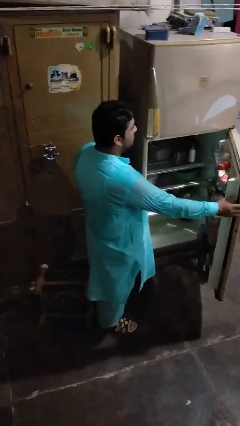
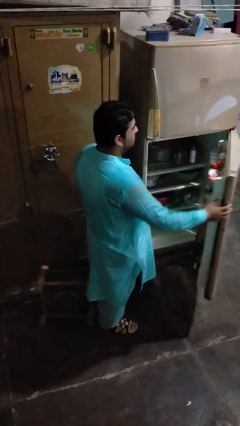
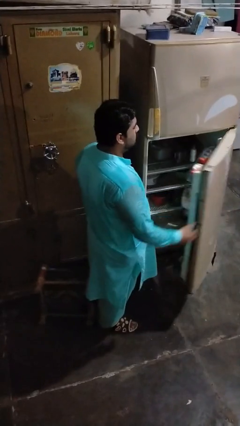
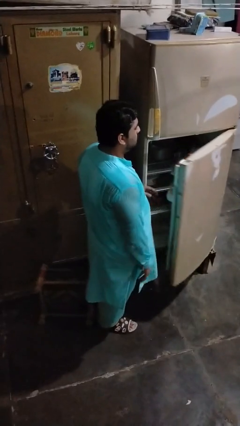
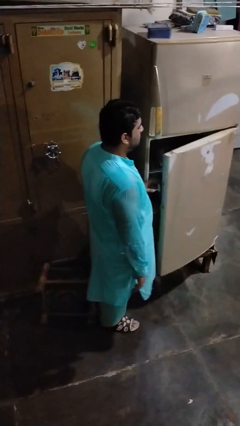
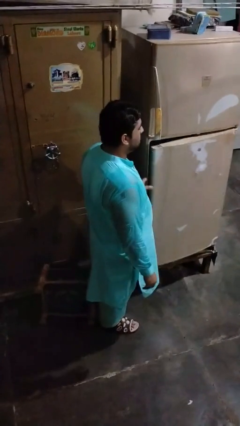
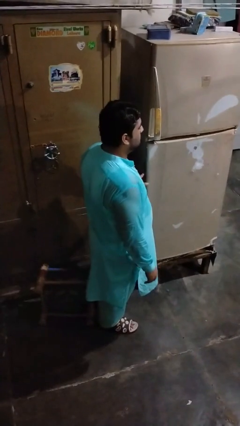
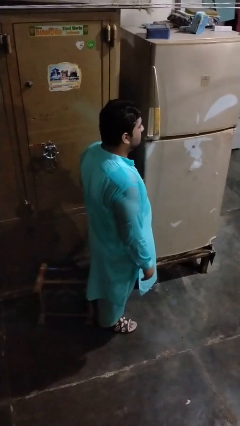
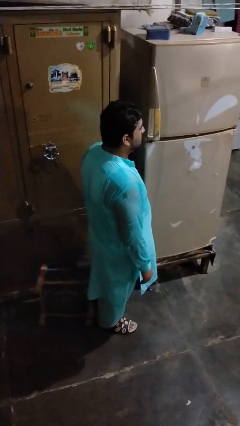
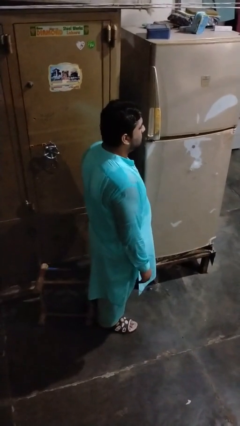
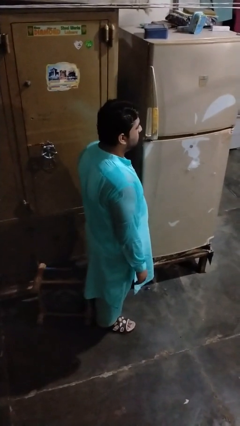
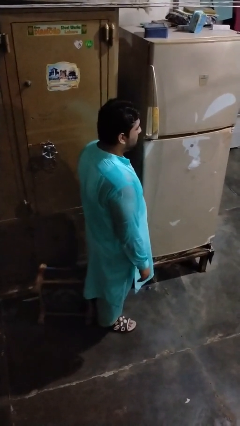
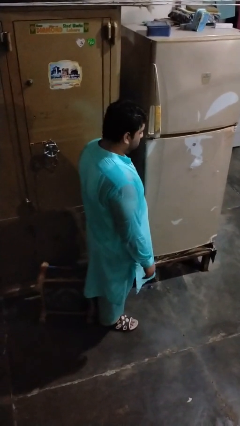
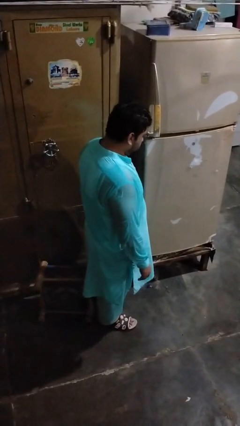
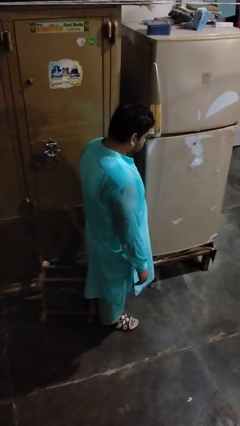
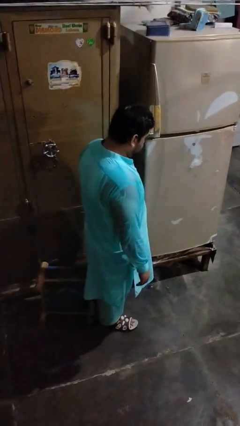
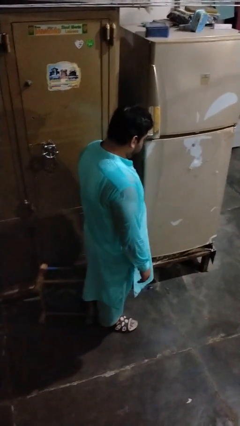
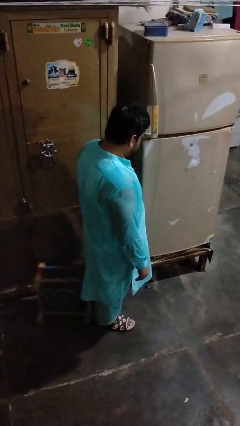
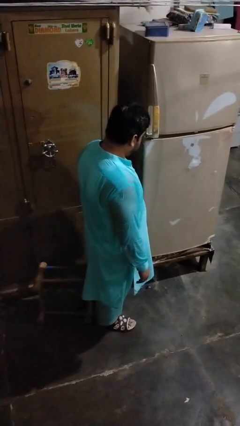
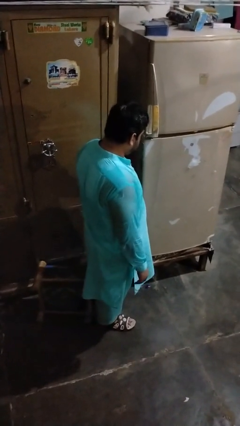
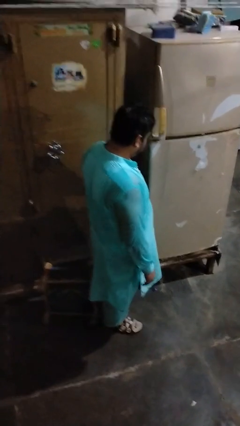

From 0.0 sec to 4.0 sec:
person closes refrigerator

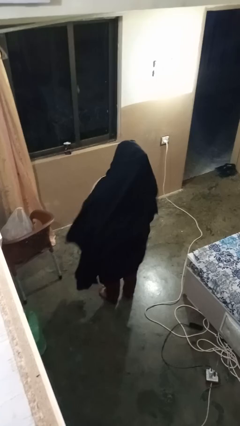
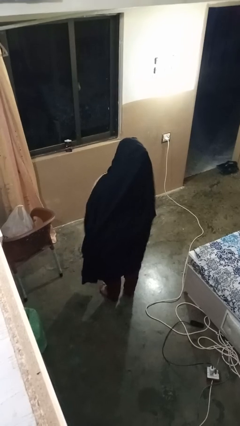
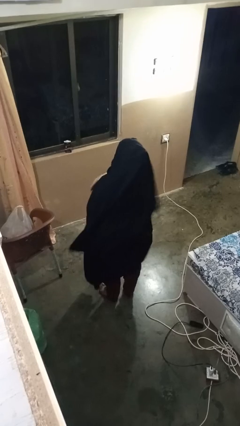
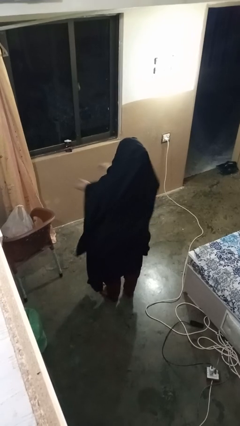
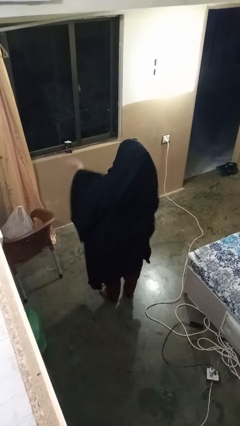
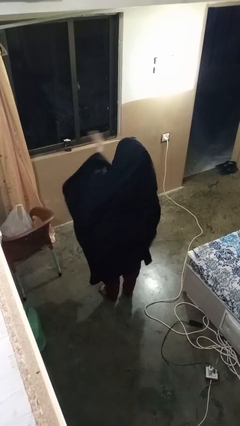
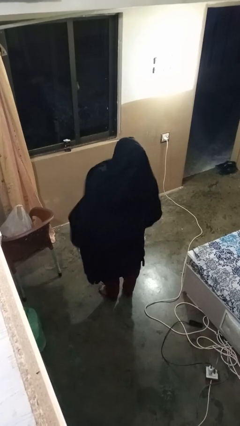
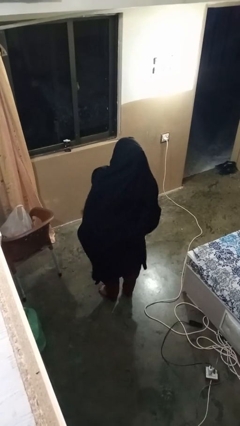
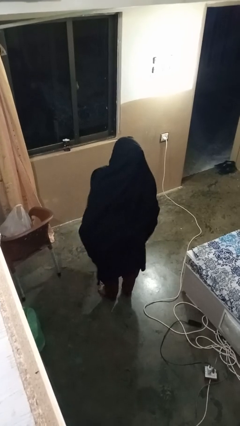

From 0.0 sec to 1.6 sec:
person gestures swipe right

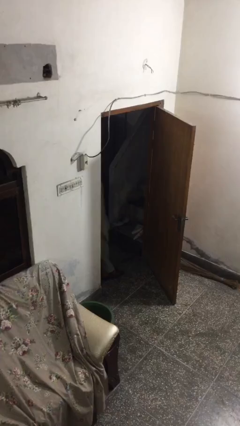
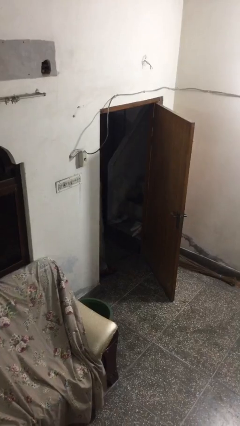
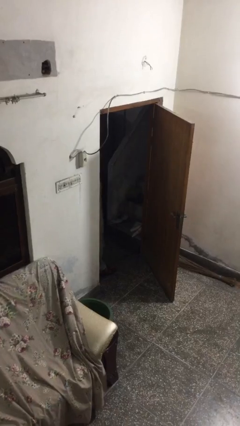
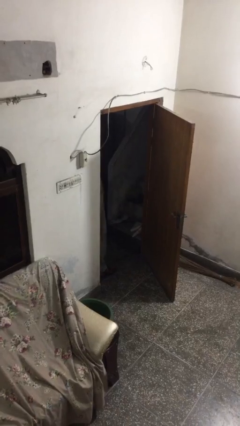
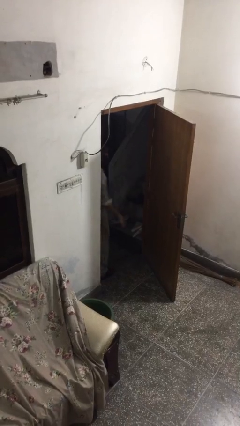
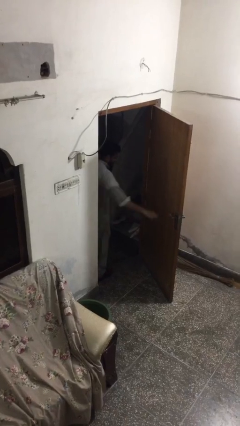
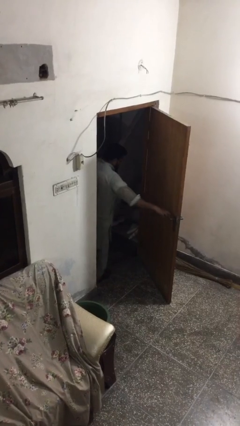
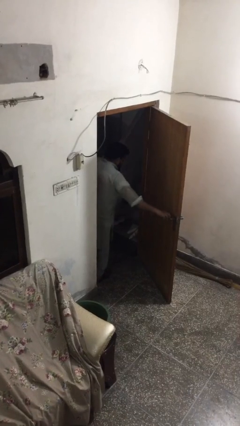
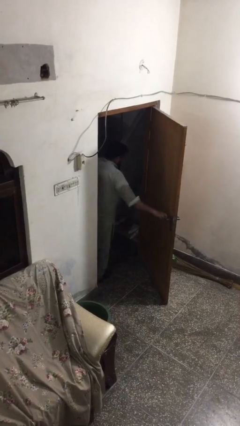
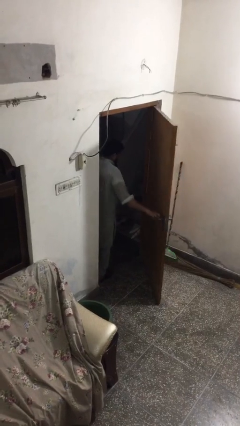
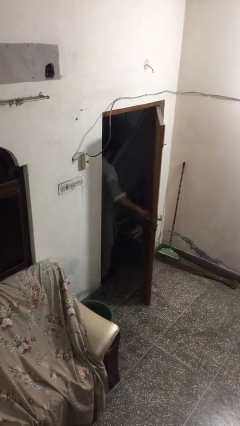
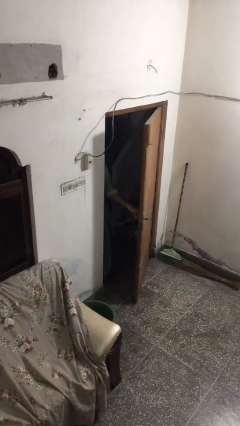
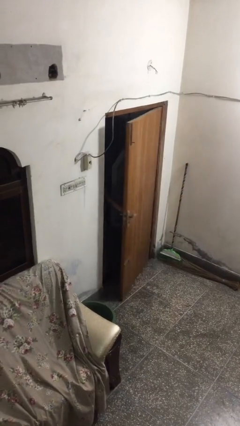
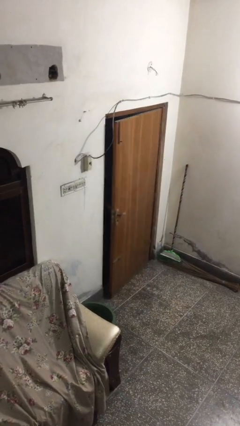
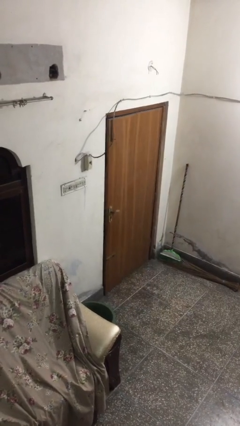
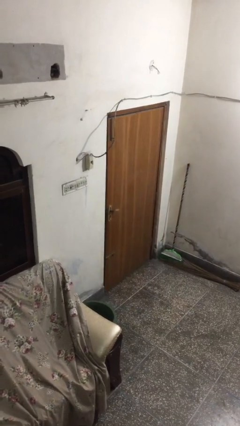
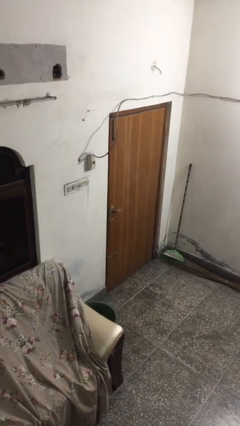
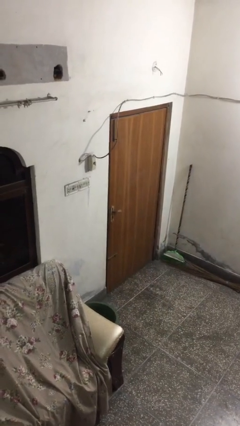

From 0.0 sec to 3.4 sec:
person closes facility door

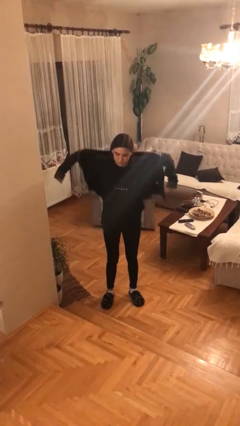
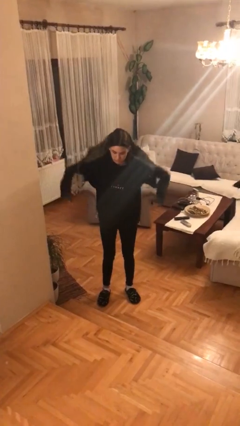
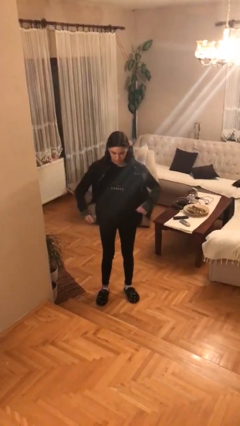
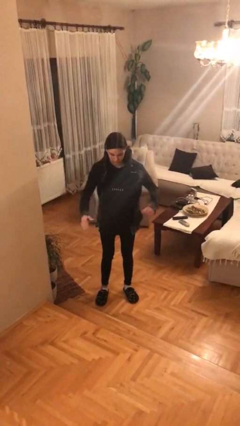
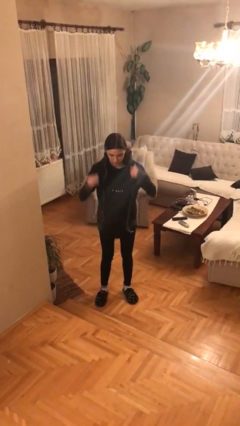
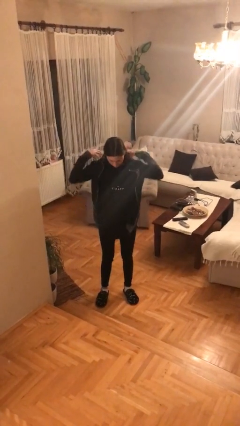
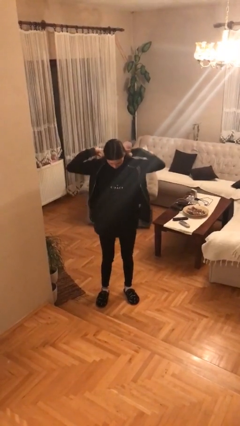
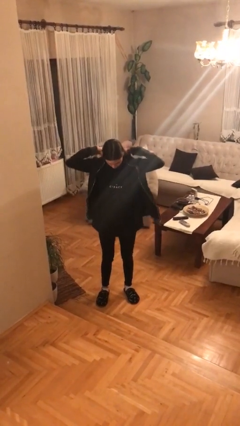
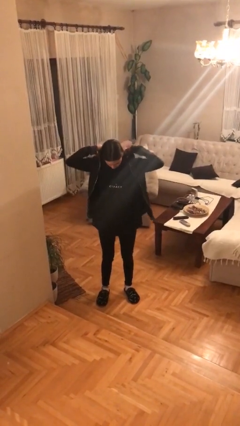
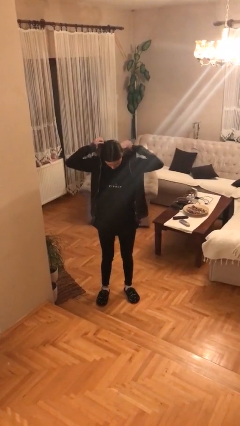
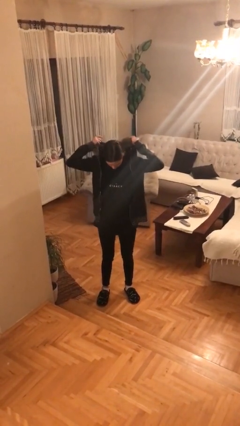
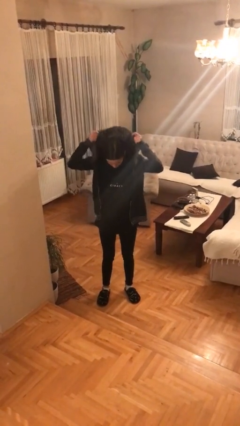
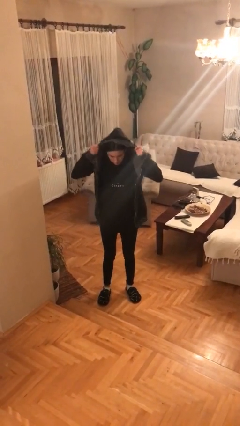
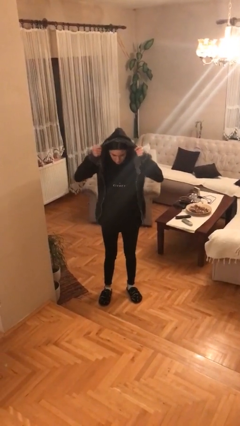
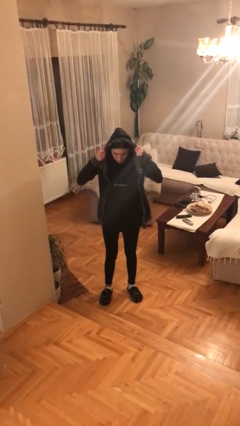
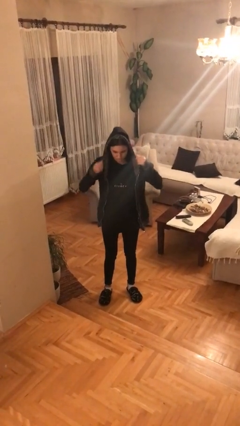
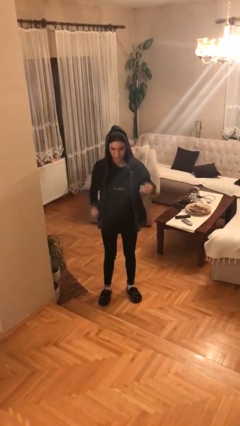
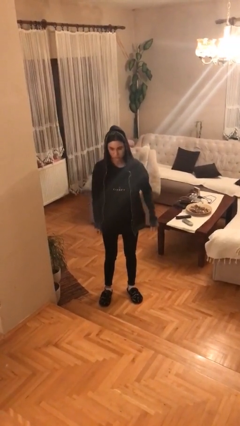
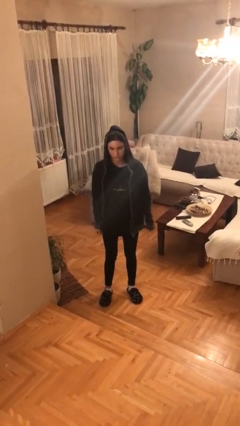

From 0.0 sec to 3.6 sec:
person puts on hoodie

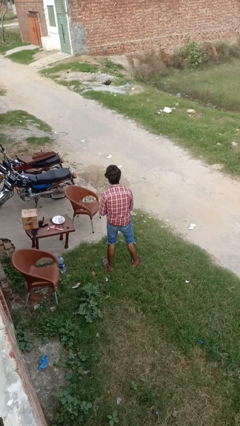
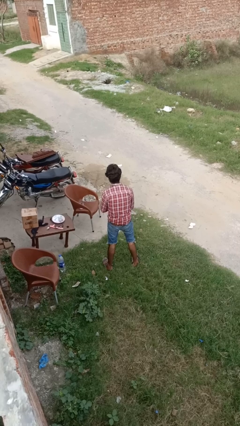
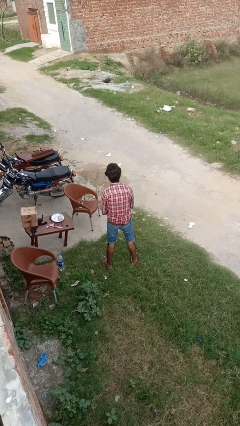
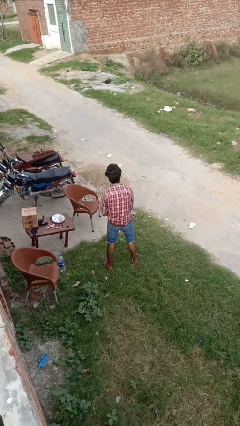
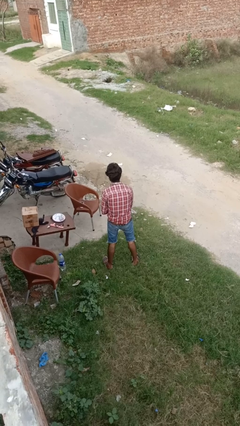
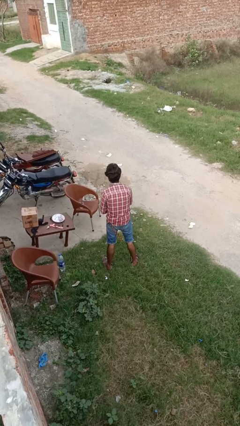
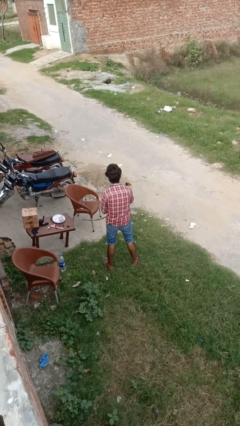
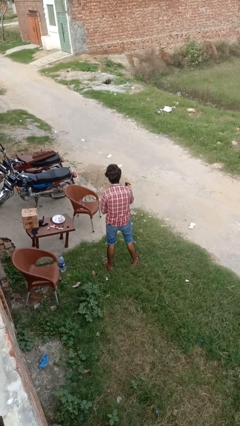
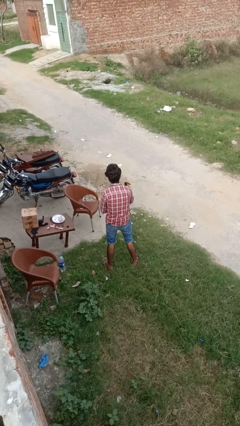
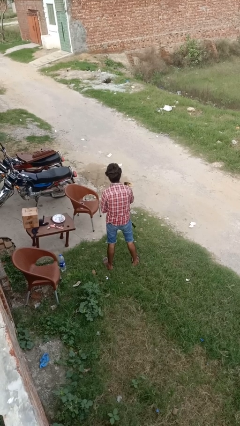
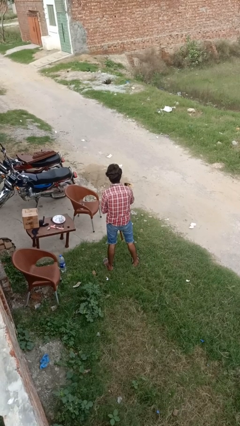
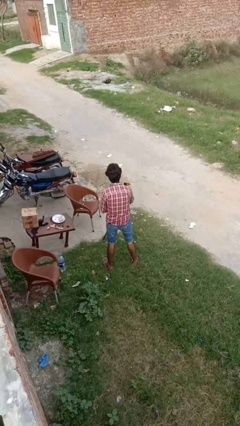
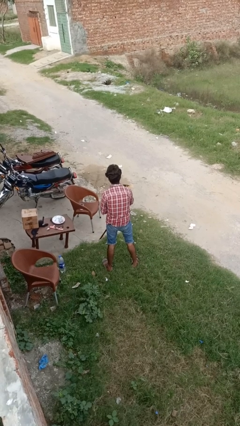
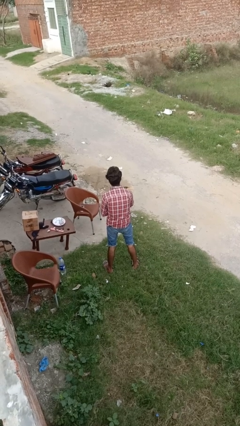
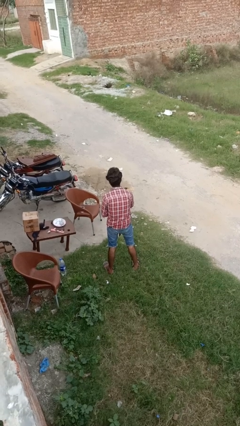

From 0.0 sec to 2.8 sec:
person takes off belt

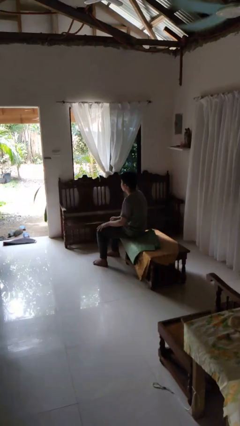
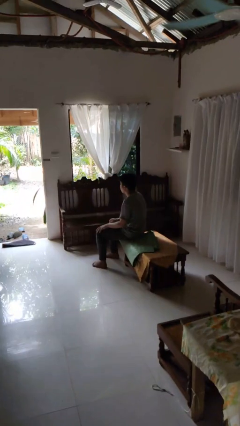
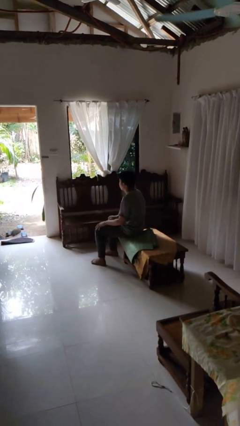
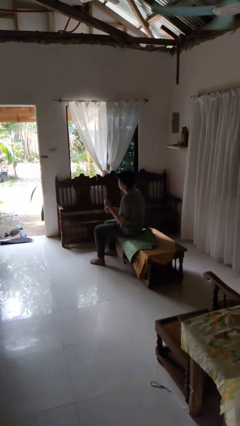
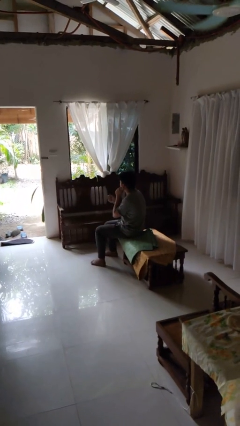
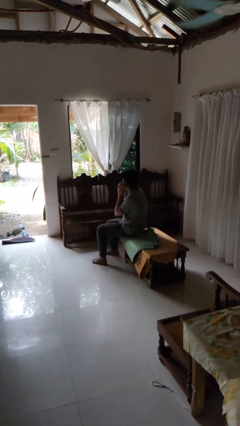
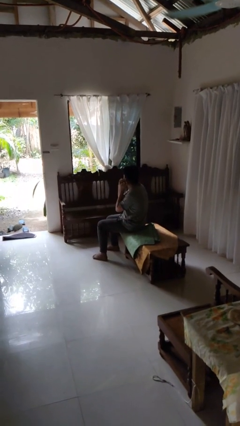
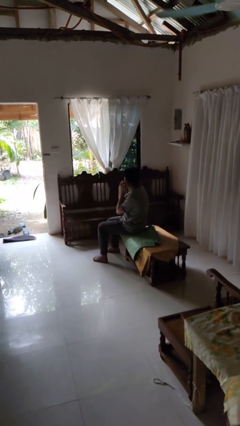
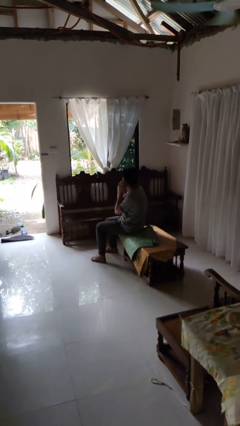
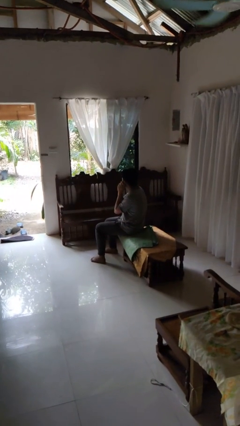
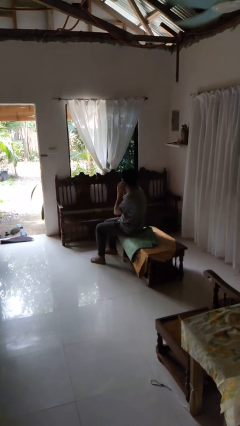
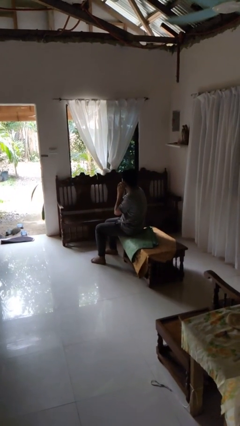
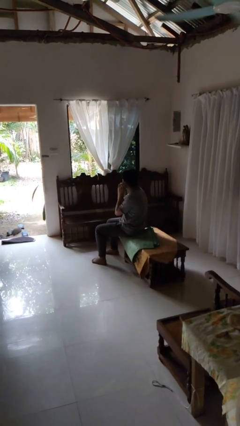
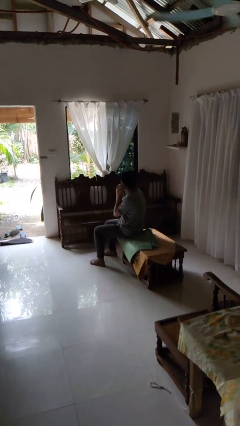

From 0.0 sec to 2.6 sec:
person puts on earrings
